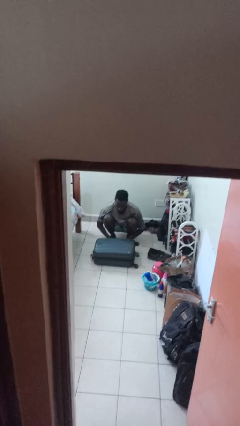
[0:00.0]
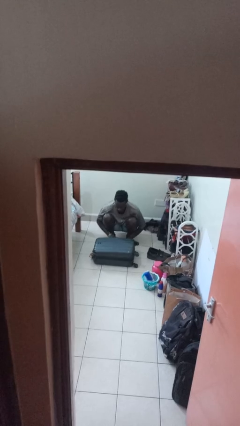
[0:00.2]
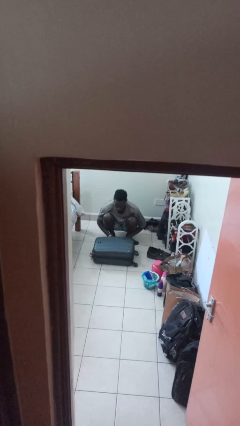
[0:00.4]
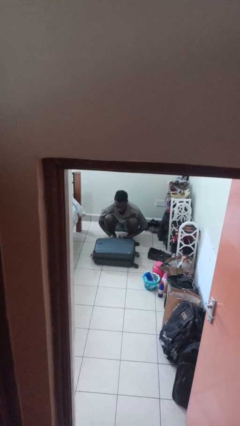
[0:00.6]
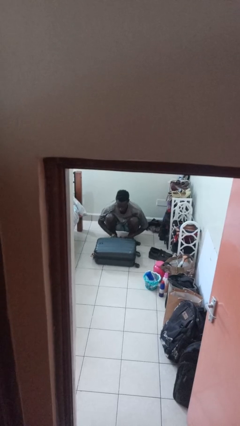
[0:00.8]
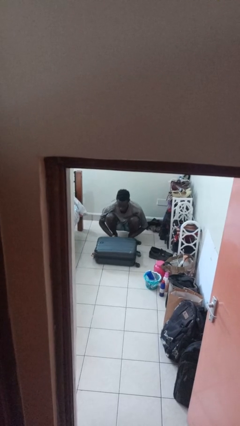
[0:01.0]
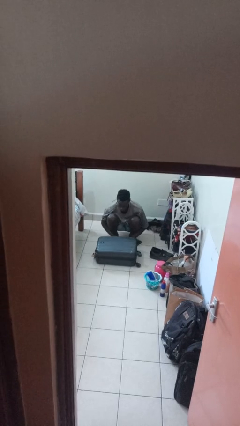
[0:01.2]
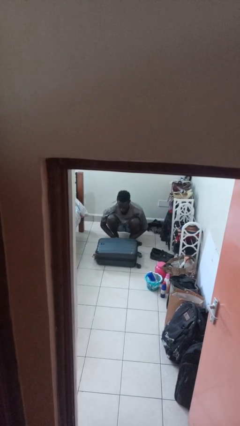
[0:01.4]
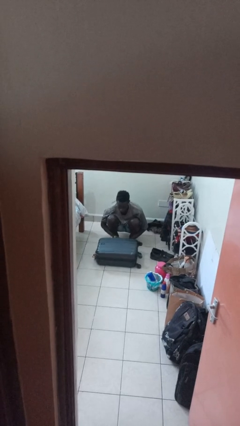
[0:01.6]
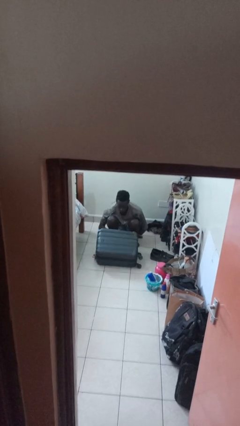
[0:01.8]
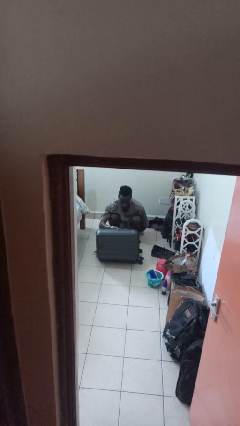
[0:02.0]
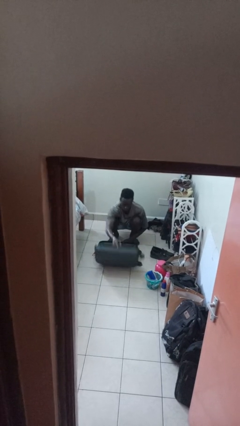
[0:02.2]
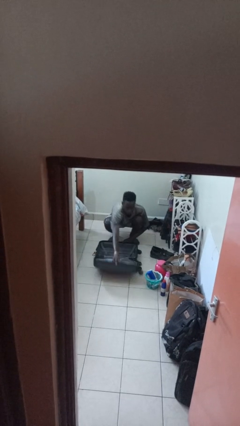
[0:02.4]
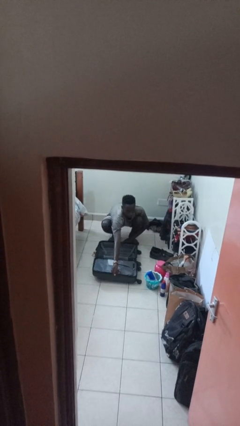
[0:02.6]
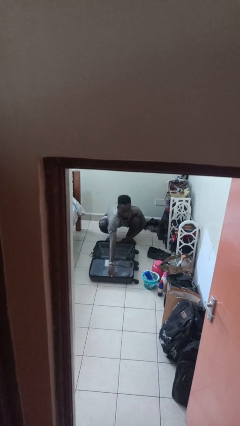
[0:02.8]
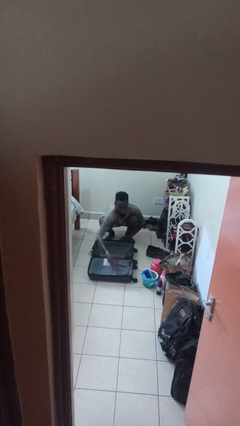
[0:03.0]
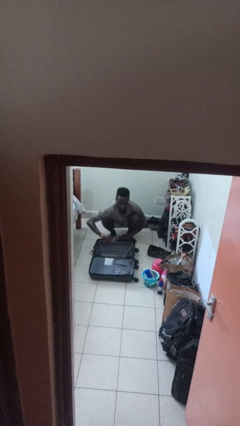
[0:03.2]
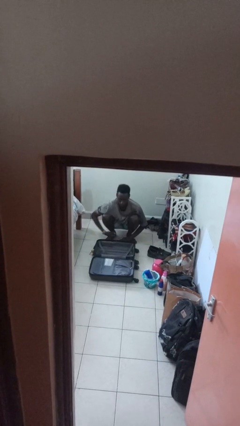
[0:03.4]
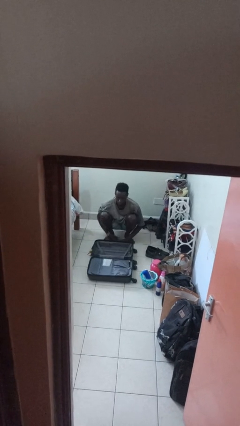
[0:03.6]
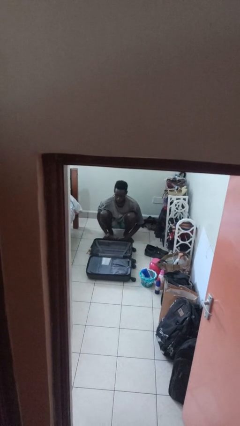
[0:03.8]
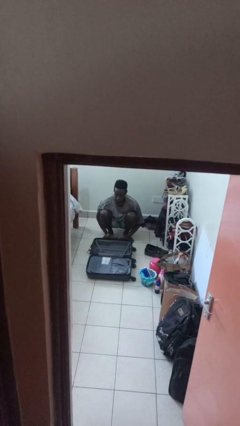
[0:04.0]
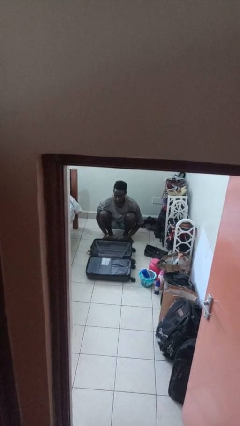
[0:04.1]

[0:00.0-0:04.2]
person opens suitcase

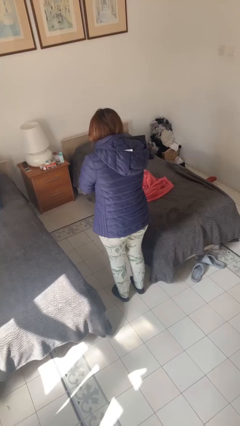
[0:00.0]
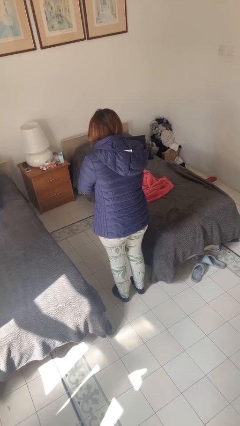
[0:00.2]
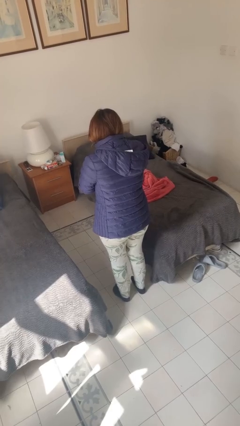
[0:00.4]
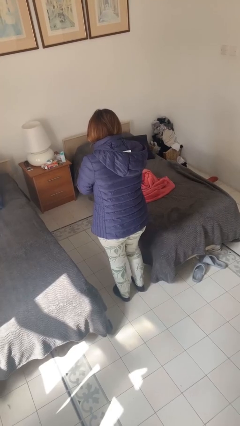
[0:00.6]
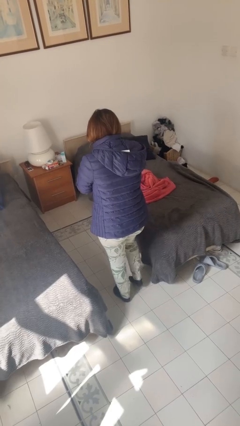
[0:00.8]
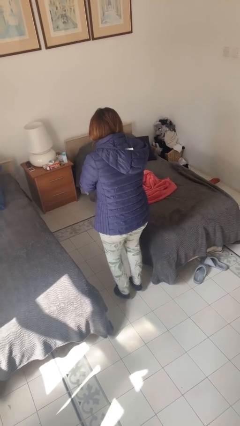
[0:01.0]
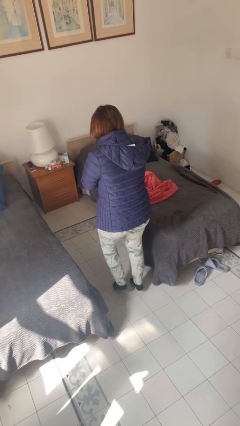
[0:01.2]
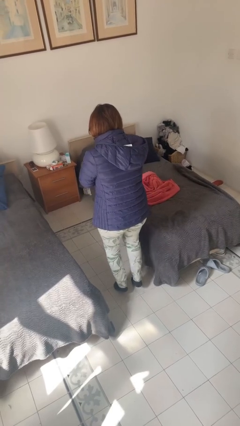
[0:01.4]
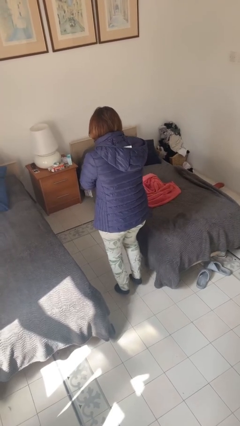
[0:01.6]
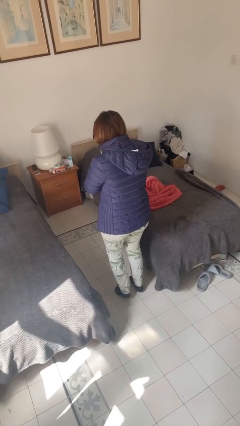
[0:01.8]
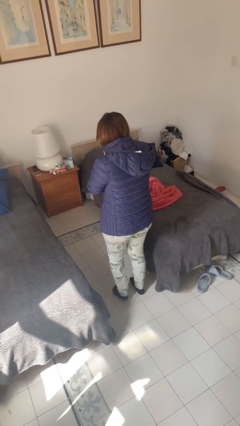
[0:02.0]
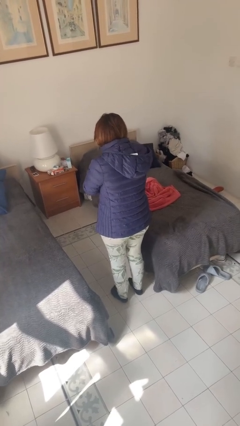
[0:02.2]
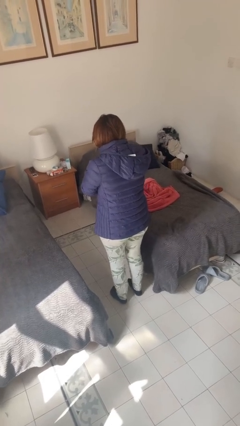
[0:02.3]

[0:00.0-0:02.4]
person walks tiptoe

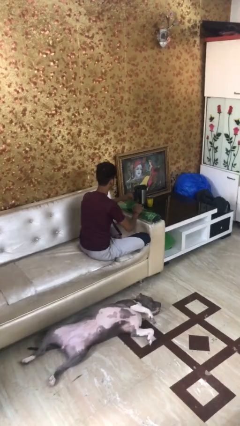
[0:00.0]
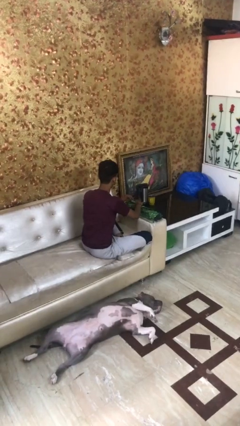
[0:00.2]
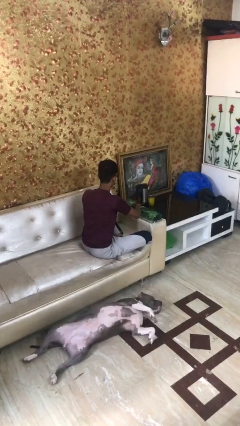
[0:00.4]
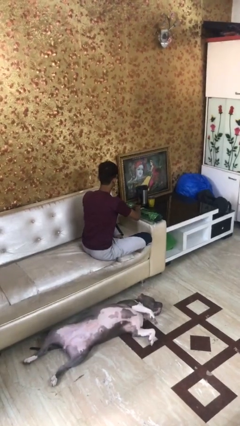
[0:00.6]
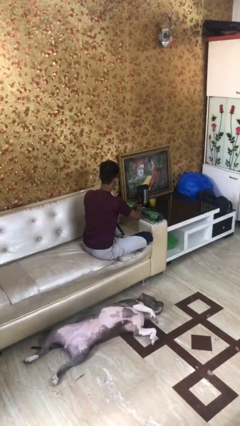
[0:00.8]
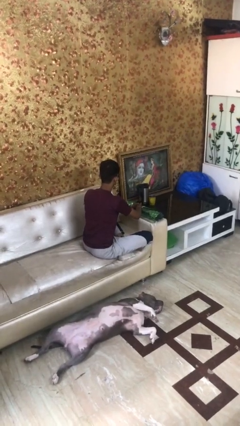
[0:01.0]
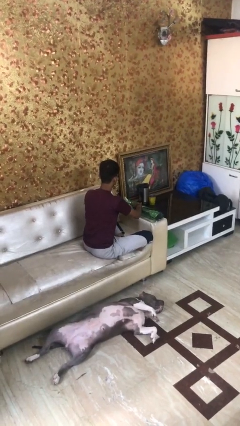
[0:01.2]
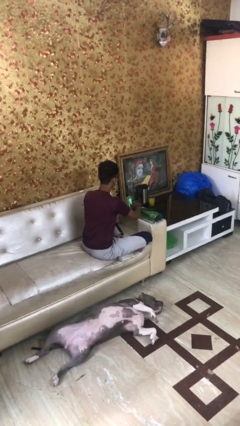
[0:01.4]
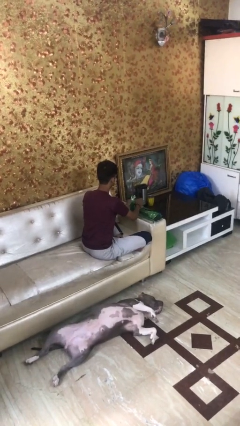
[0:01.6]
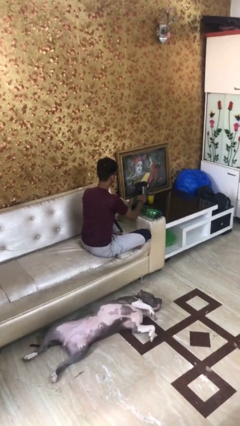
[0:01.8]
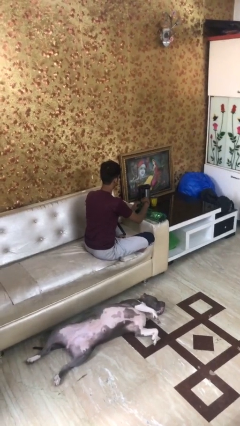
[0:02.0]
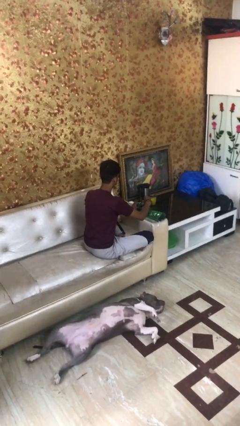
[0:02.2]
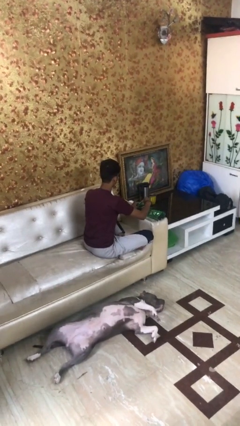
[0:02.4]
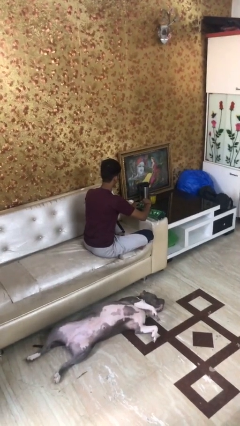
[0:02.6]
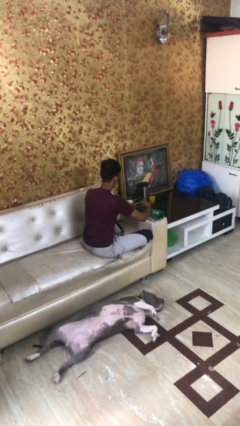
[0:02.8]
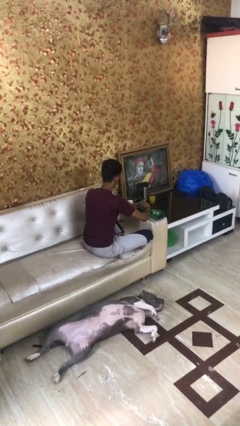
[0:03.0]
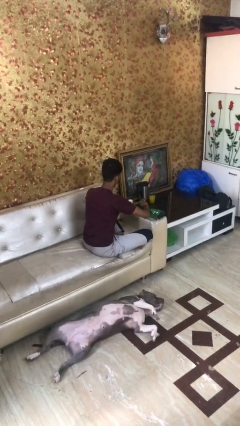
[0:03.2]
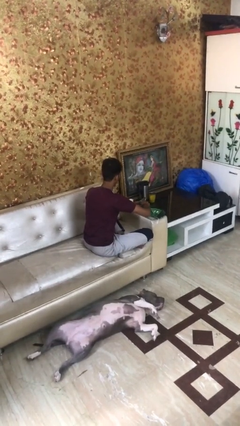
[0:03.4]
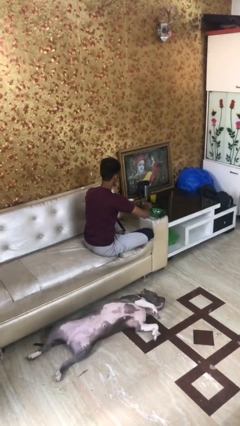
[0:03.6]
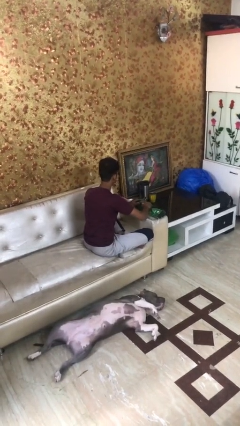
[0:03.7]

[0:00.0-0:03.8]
person wraps box

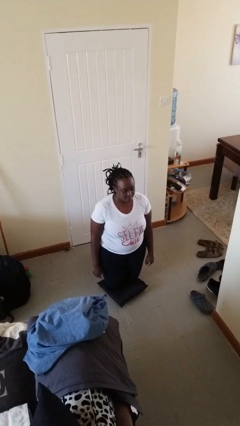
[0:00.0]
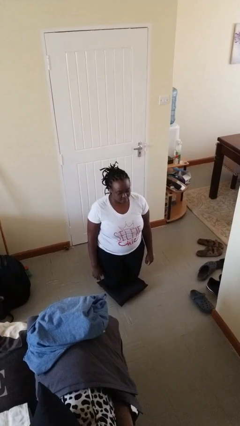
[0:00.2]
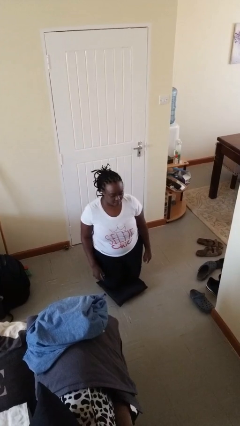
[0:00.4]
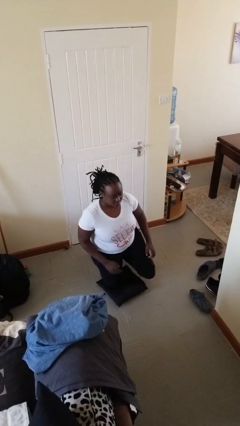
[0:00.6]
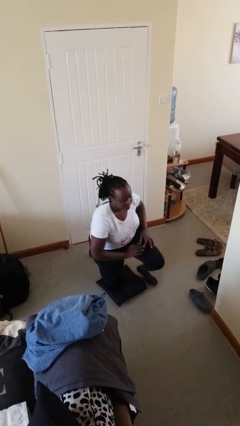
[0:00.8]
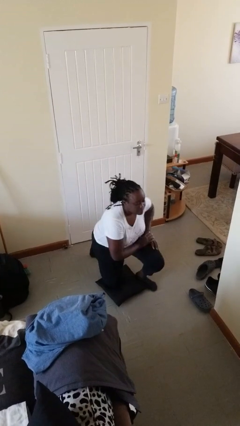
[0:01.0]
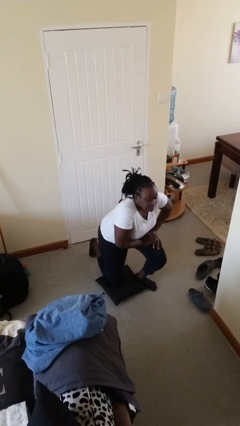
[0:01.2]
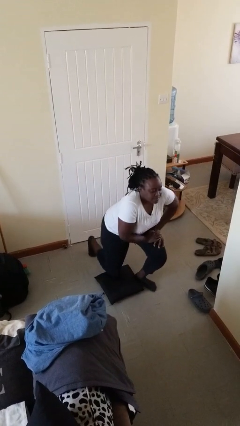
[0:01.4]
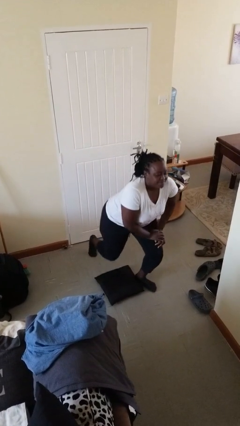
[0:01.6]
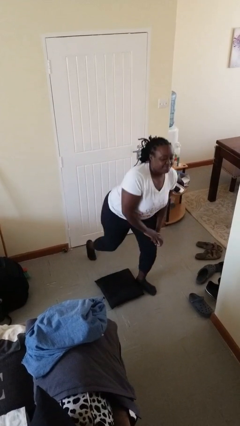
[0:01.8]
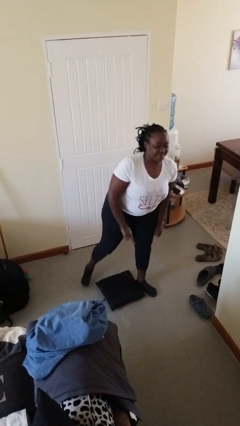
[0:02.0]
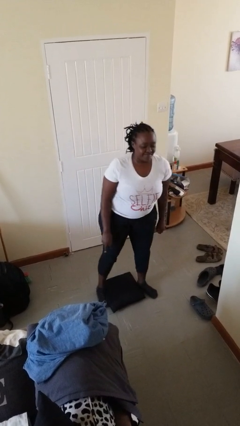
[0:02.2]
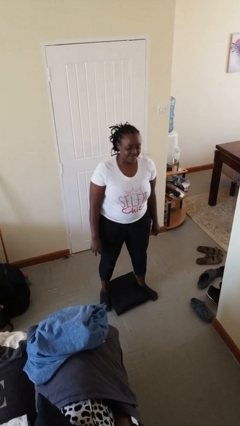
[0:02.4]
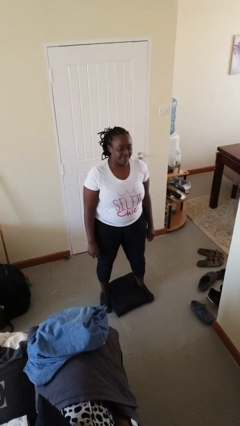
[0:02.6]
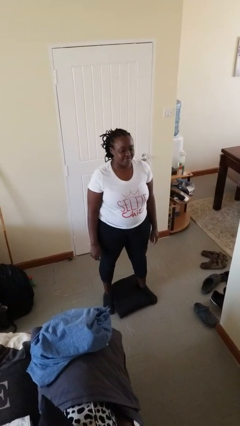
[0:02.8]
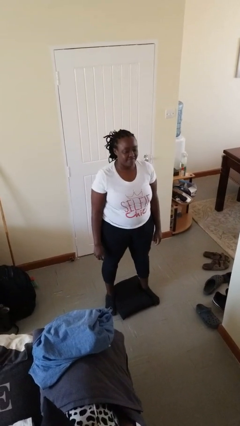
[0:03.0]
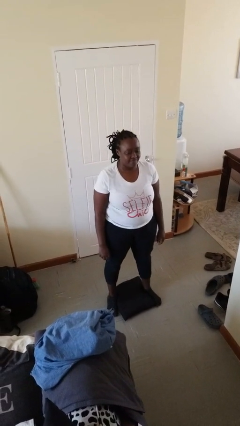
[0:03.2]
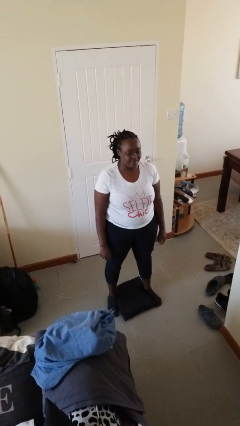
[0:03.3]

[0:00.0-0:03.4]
person stands up from floor

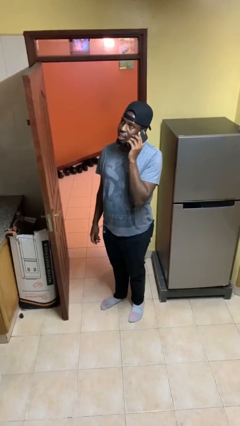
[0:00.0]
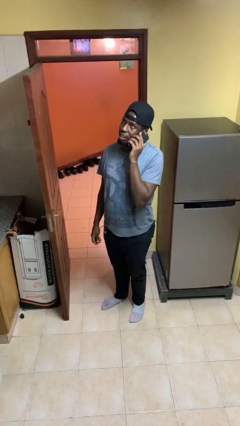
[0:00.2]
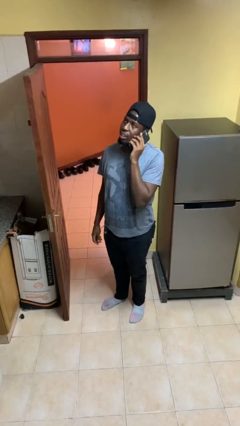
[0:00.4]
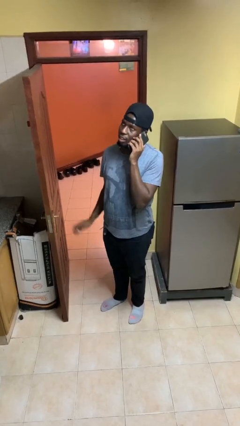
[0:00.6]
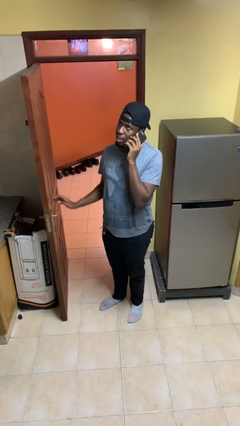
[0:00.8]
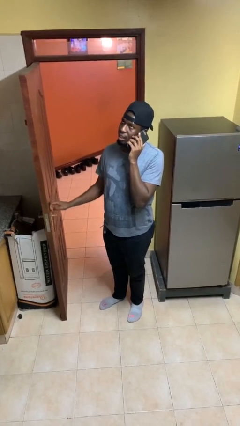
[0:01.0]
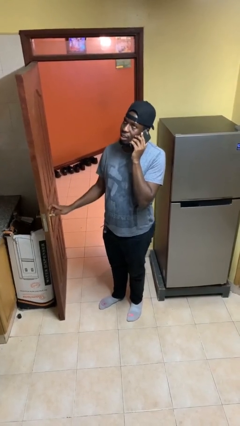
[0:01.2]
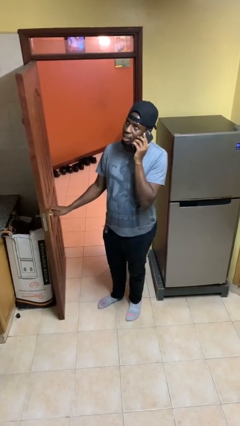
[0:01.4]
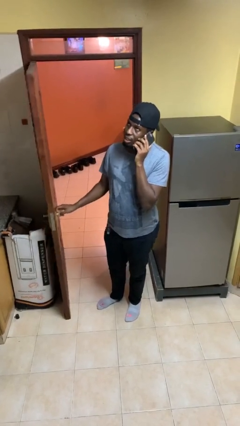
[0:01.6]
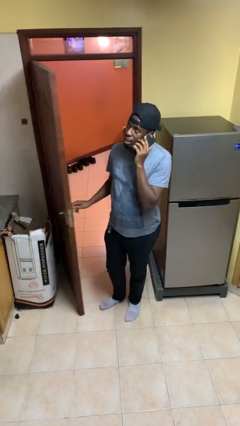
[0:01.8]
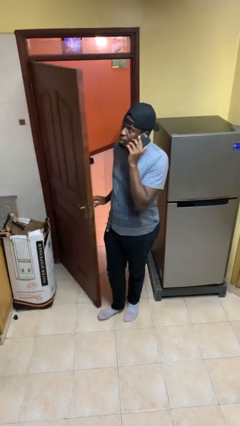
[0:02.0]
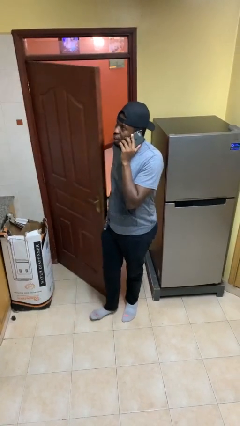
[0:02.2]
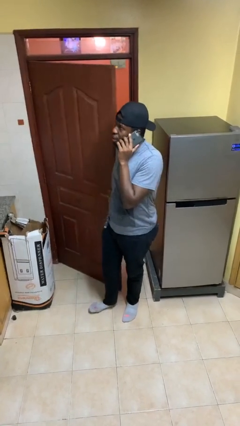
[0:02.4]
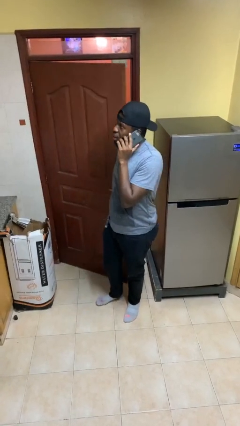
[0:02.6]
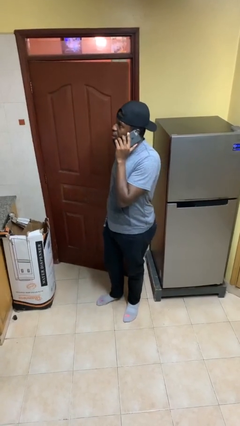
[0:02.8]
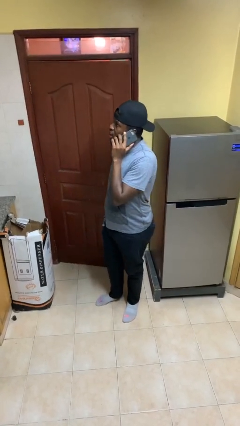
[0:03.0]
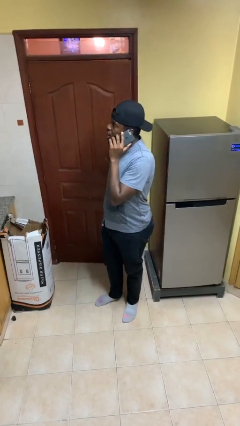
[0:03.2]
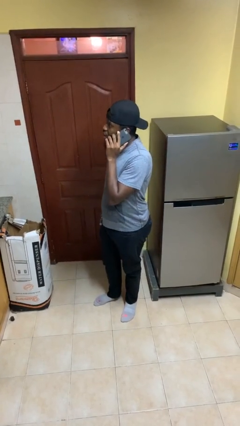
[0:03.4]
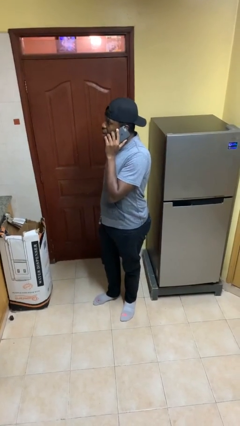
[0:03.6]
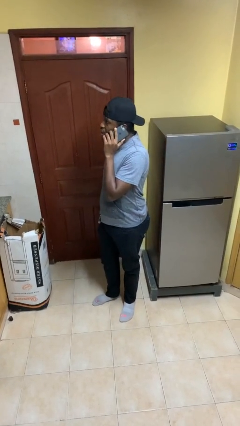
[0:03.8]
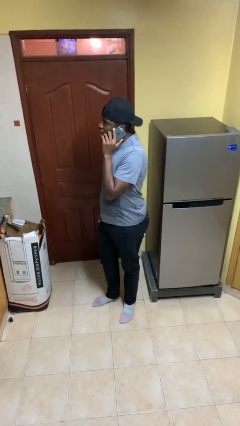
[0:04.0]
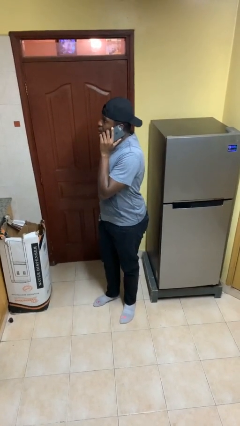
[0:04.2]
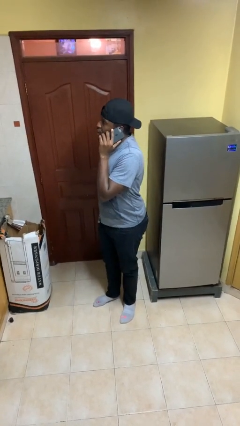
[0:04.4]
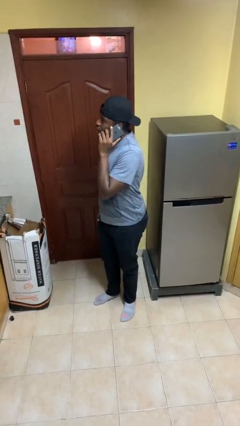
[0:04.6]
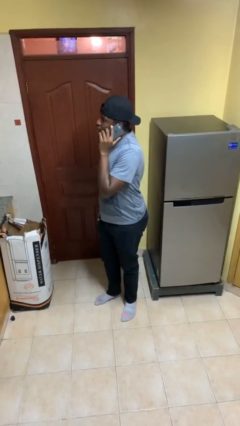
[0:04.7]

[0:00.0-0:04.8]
person closes facility door
